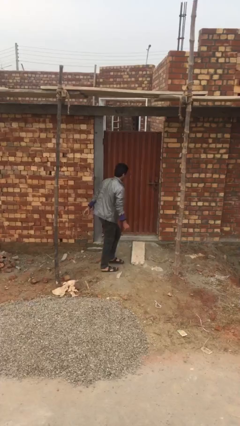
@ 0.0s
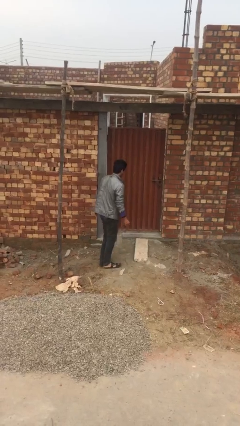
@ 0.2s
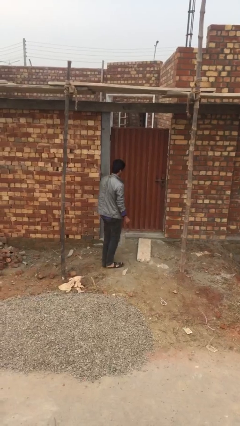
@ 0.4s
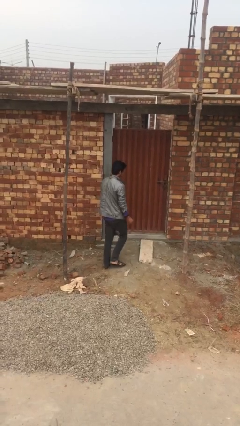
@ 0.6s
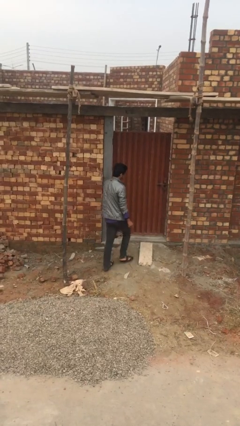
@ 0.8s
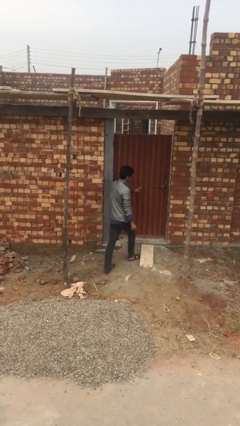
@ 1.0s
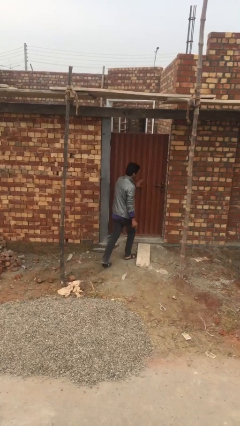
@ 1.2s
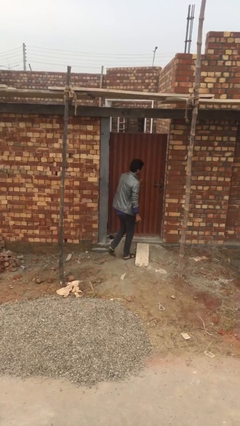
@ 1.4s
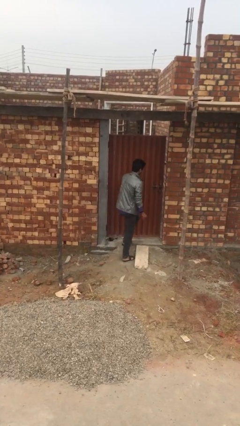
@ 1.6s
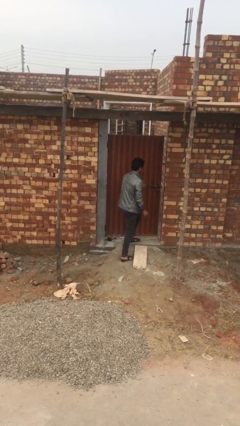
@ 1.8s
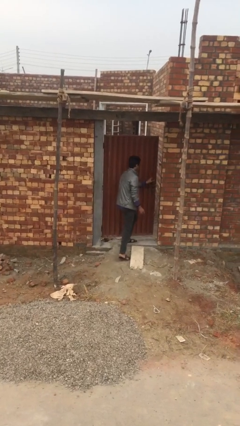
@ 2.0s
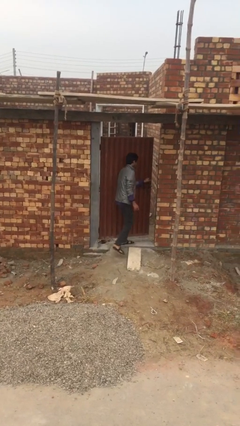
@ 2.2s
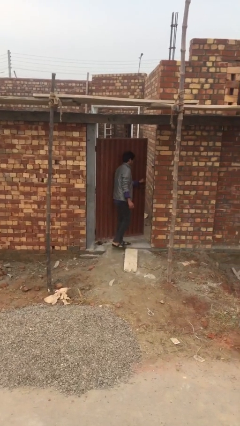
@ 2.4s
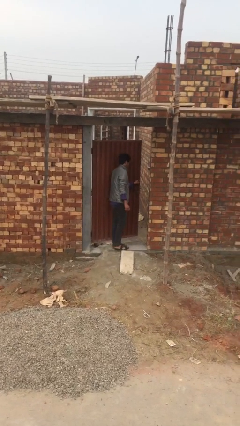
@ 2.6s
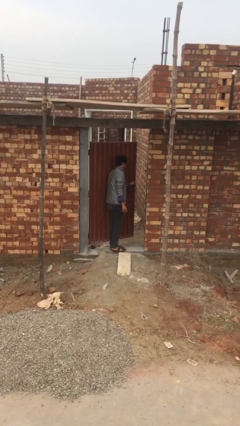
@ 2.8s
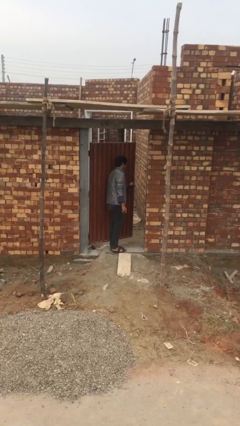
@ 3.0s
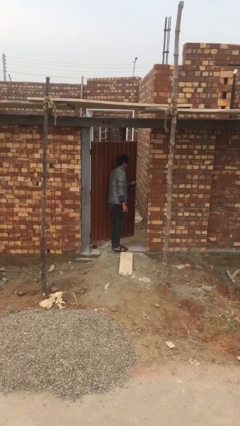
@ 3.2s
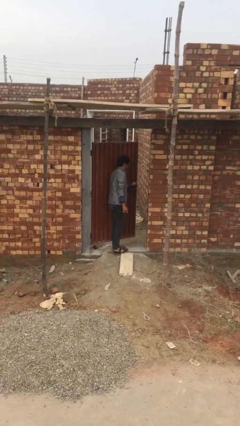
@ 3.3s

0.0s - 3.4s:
person opens facility door

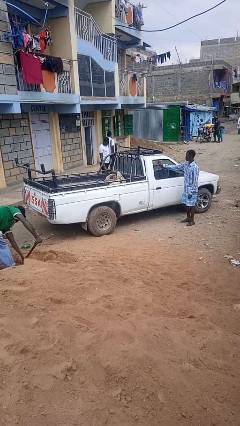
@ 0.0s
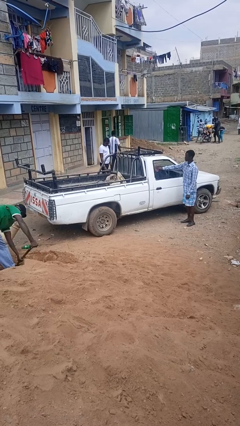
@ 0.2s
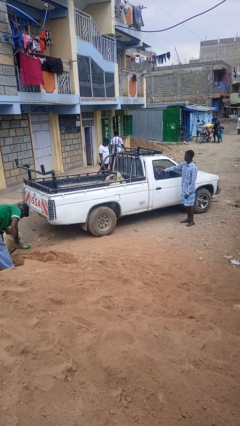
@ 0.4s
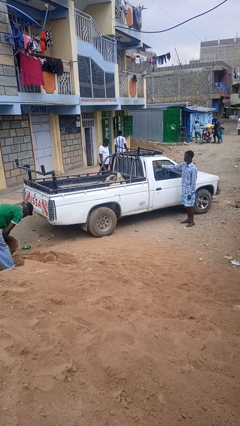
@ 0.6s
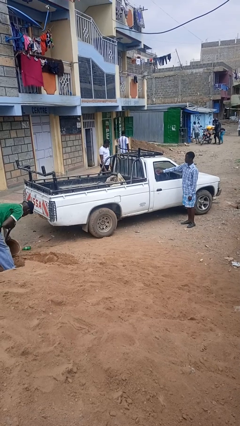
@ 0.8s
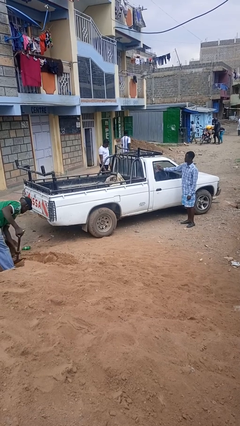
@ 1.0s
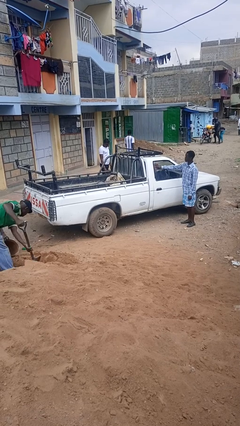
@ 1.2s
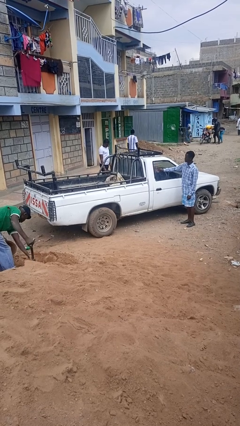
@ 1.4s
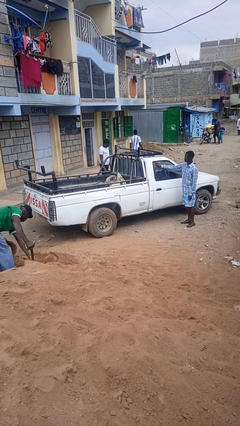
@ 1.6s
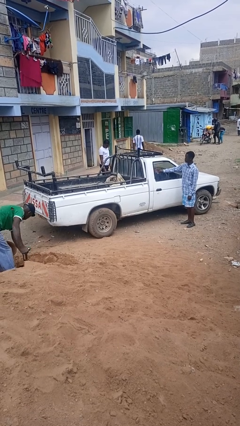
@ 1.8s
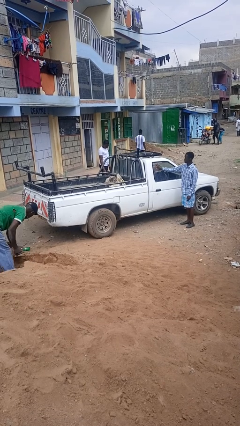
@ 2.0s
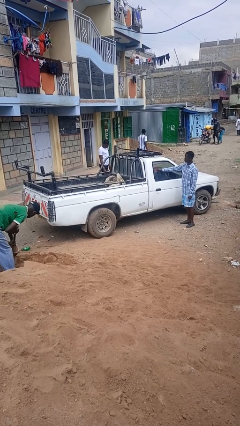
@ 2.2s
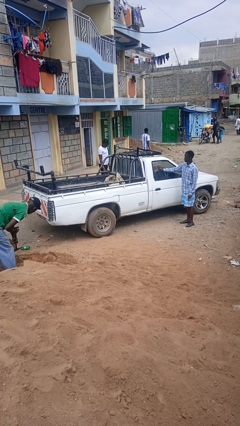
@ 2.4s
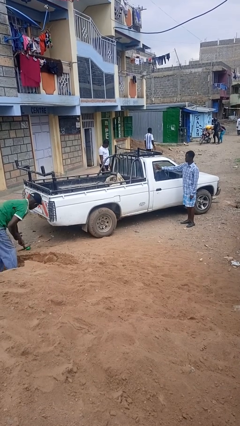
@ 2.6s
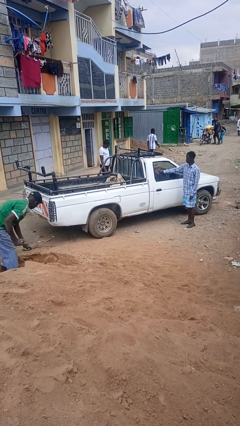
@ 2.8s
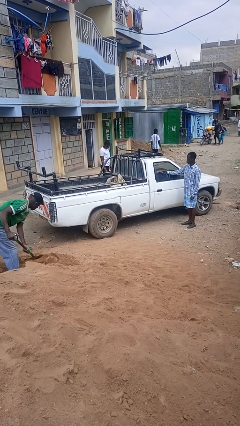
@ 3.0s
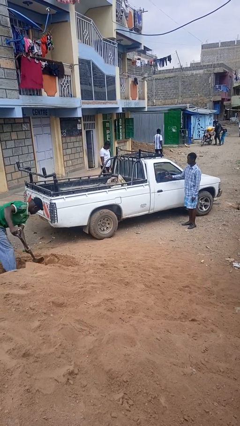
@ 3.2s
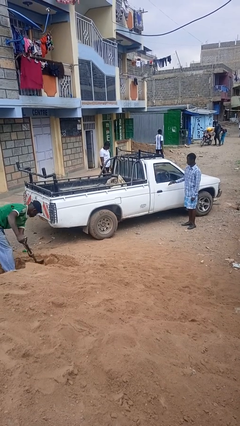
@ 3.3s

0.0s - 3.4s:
person polishes car with rag

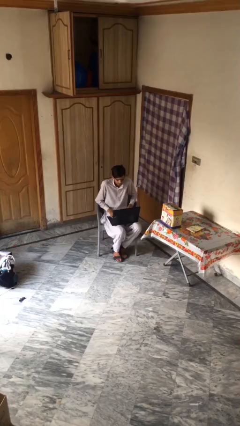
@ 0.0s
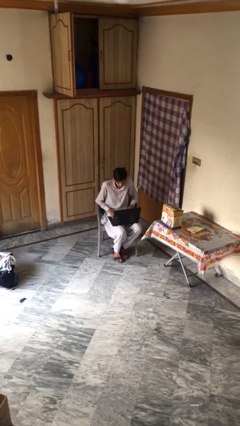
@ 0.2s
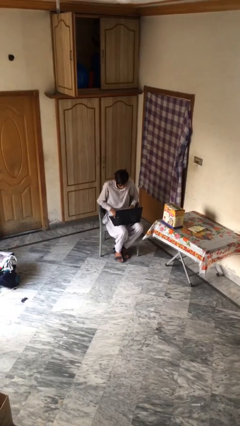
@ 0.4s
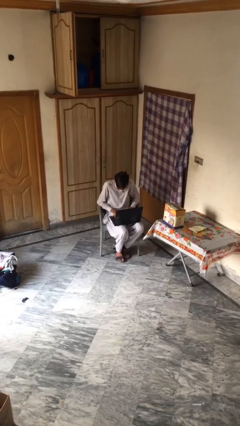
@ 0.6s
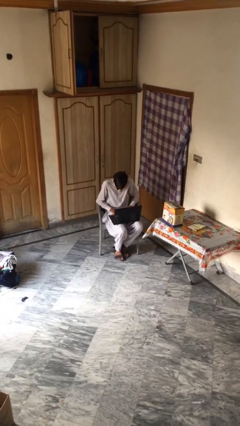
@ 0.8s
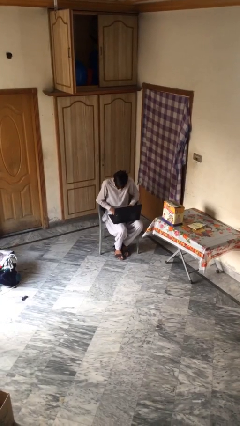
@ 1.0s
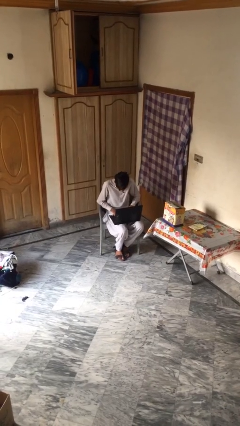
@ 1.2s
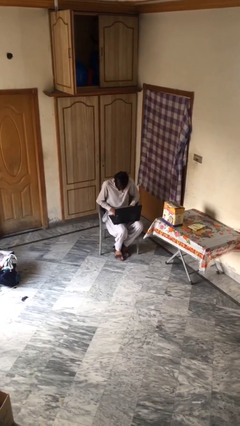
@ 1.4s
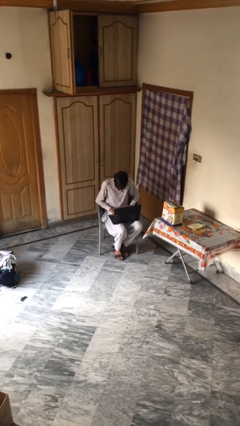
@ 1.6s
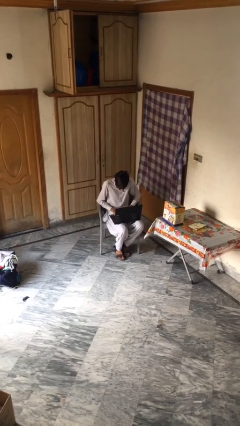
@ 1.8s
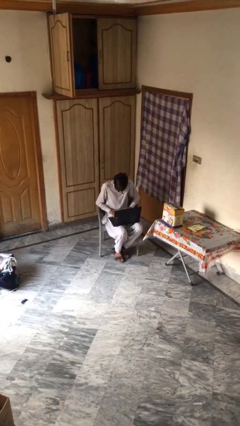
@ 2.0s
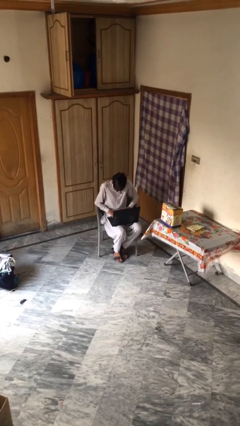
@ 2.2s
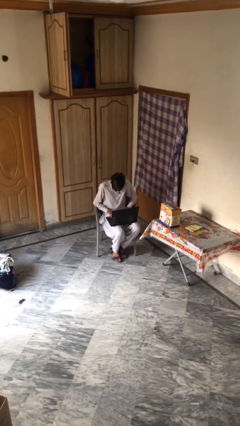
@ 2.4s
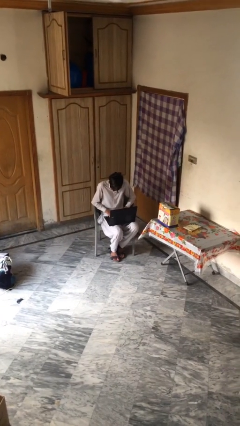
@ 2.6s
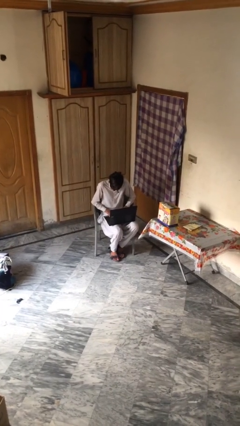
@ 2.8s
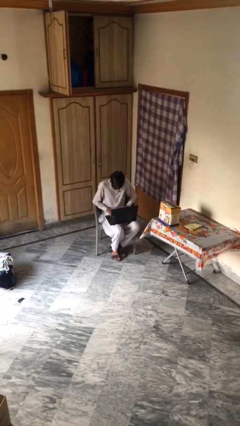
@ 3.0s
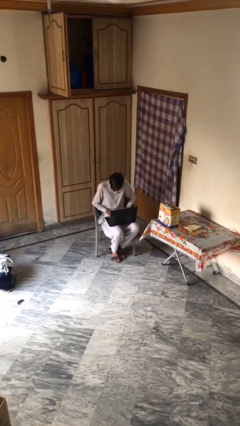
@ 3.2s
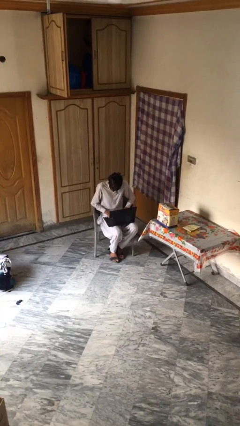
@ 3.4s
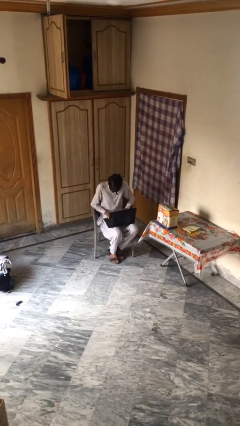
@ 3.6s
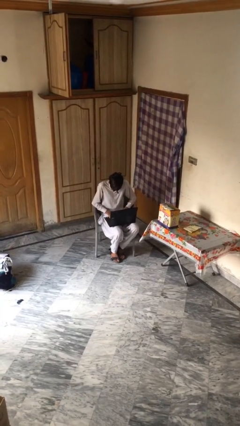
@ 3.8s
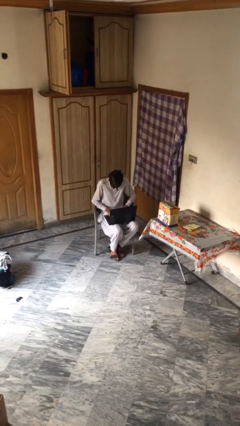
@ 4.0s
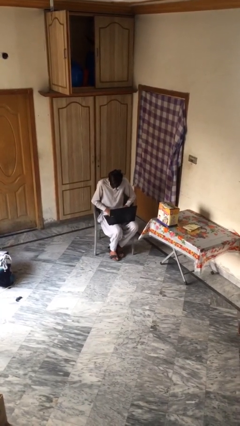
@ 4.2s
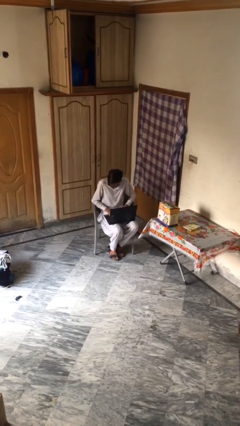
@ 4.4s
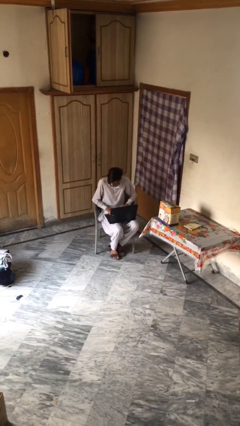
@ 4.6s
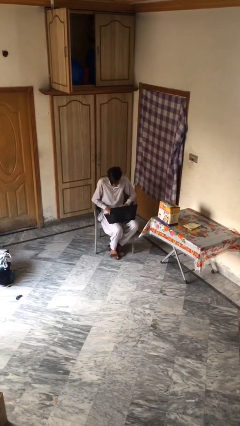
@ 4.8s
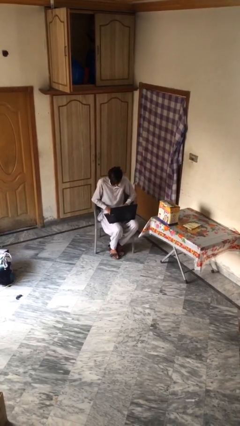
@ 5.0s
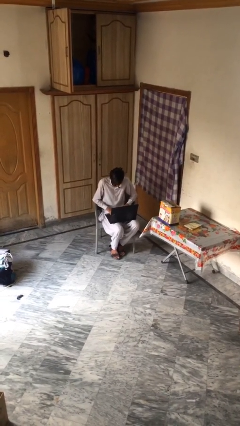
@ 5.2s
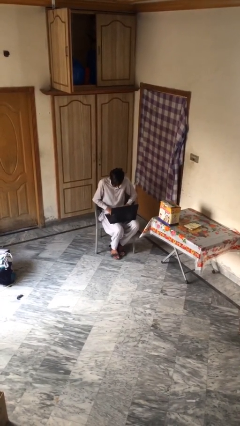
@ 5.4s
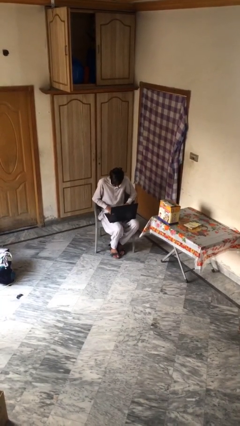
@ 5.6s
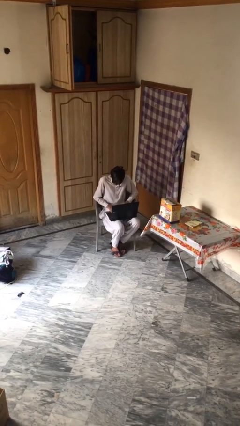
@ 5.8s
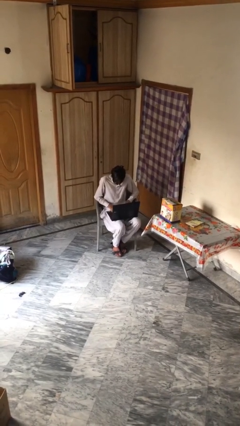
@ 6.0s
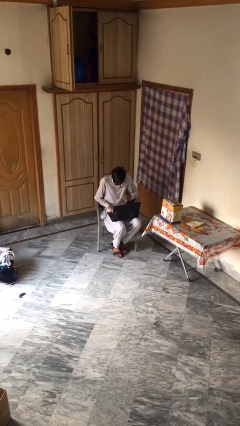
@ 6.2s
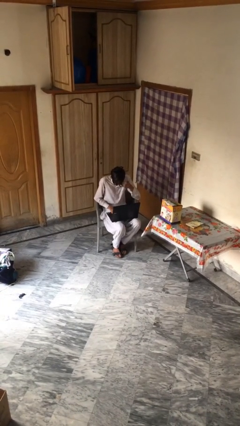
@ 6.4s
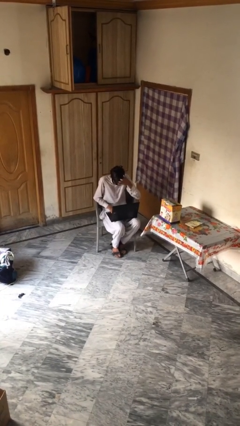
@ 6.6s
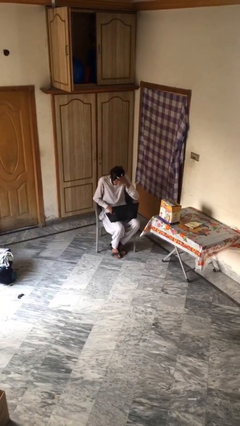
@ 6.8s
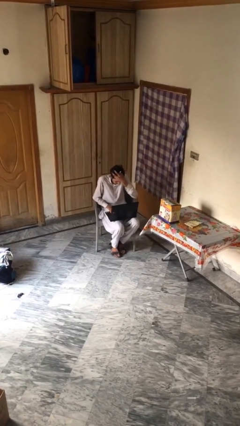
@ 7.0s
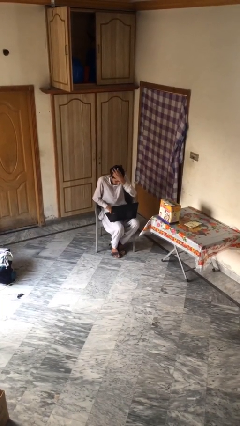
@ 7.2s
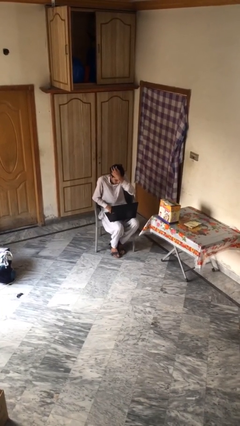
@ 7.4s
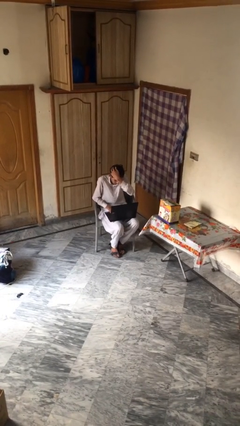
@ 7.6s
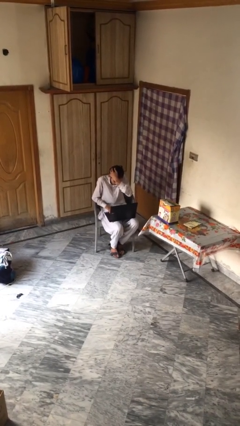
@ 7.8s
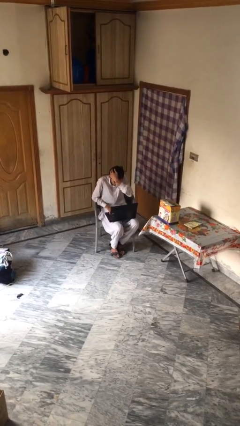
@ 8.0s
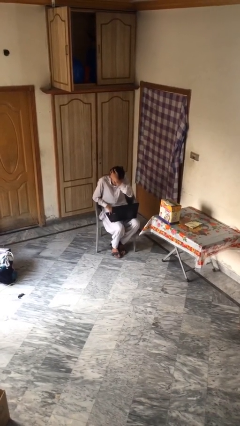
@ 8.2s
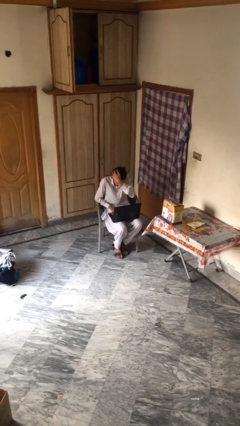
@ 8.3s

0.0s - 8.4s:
person interacts with laptop

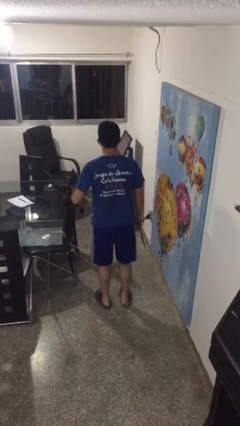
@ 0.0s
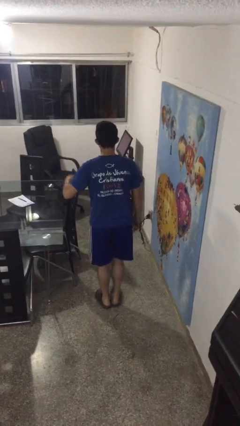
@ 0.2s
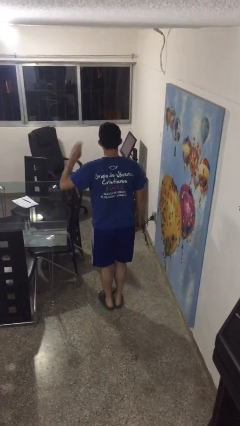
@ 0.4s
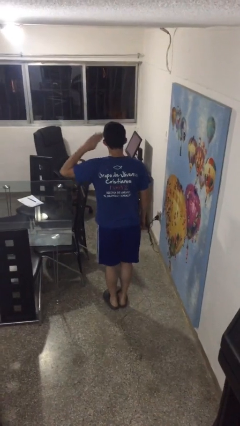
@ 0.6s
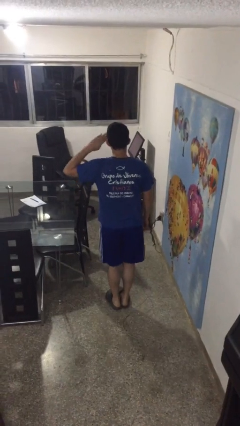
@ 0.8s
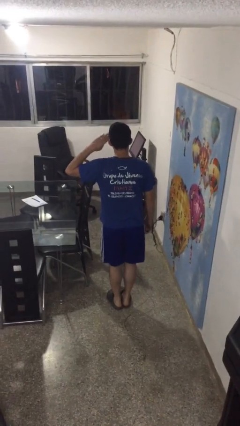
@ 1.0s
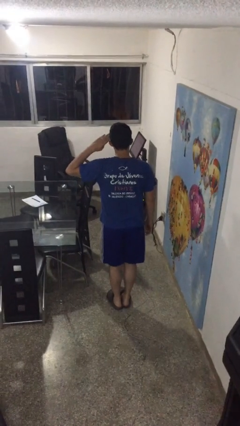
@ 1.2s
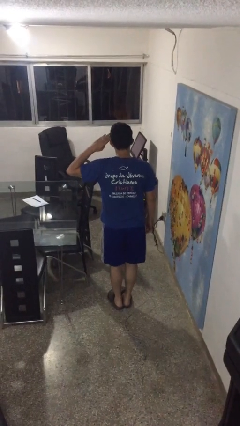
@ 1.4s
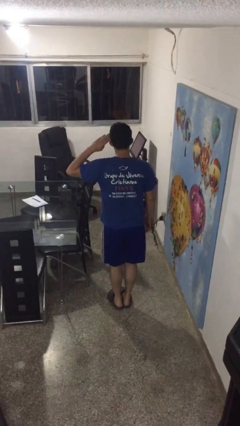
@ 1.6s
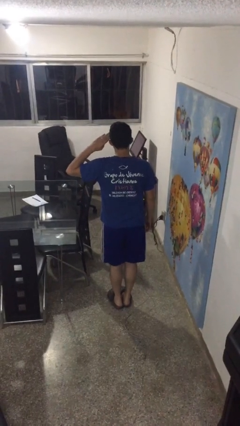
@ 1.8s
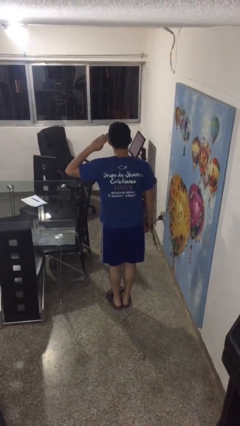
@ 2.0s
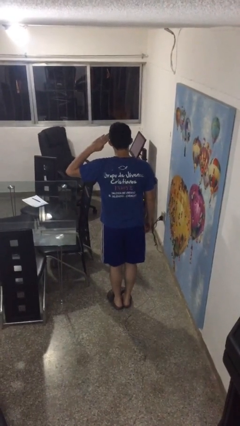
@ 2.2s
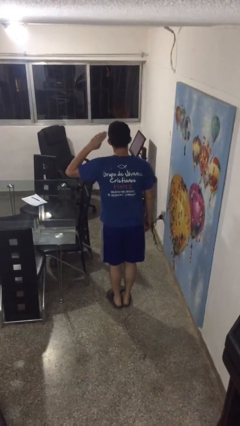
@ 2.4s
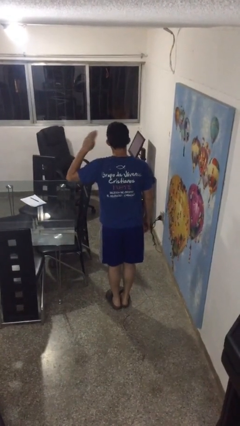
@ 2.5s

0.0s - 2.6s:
person salutes
